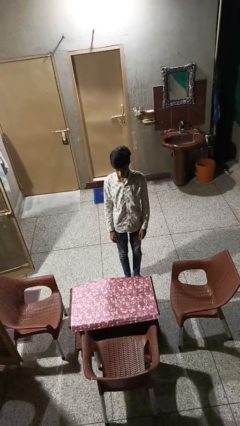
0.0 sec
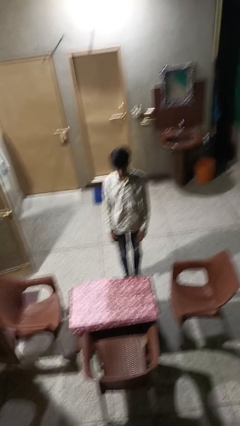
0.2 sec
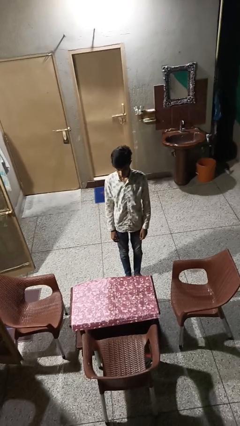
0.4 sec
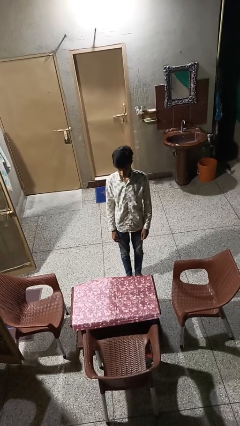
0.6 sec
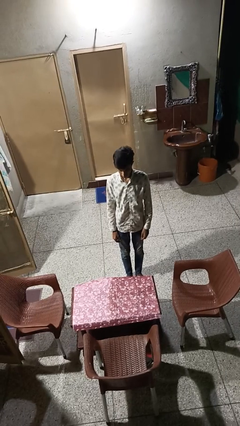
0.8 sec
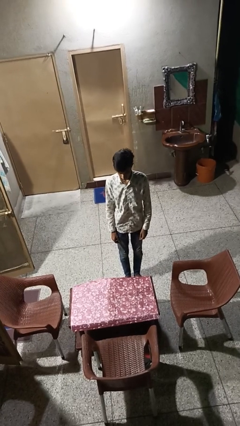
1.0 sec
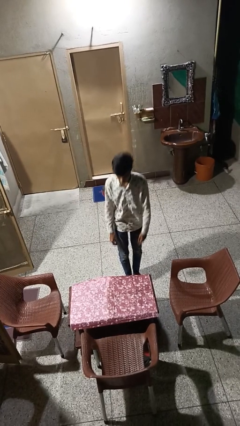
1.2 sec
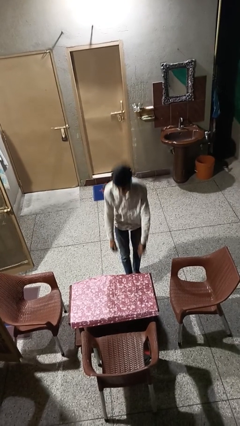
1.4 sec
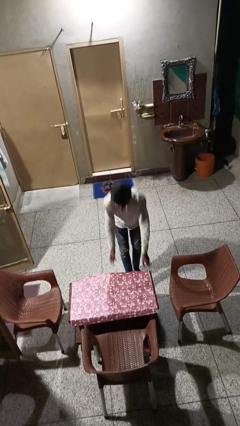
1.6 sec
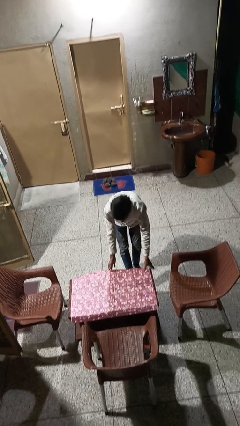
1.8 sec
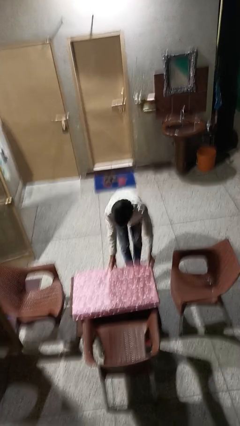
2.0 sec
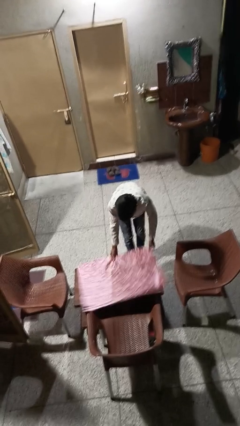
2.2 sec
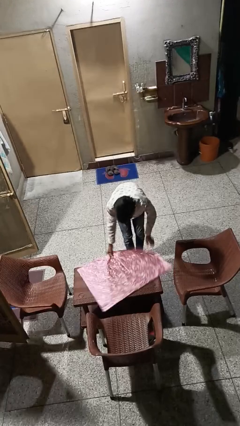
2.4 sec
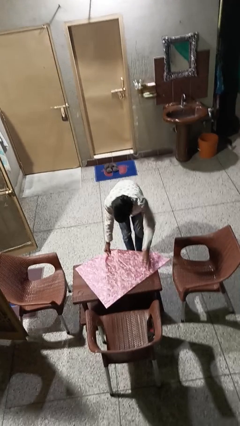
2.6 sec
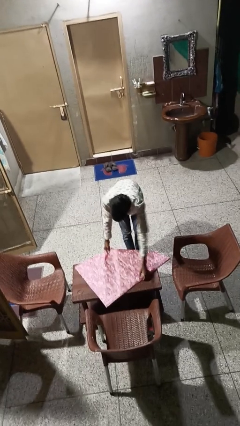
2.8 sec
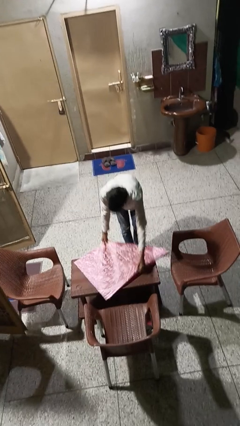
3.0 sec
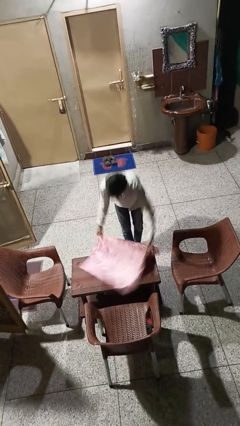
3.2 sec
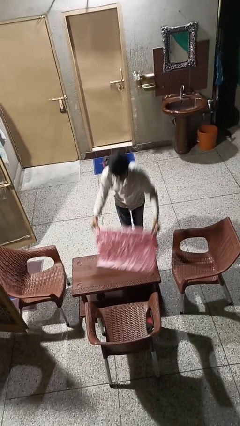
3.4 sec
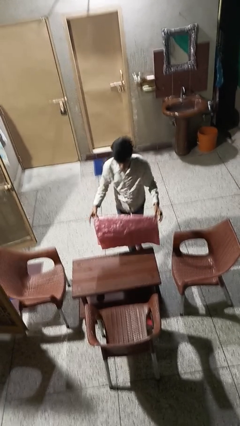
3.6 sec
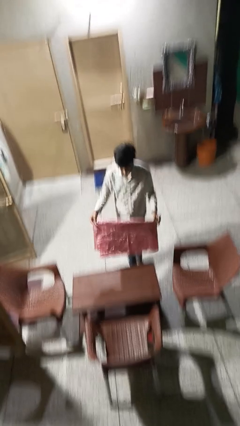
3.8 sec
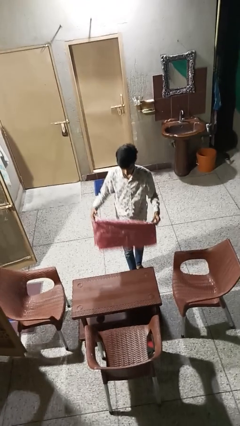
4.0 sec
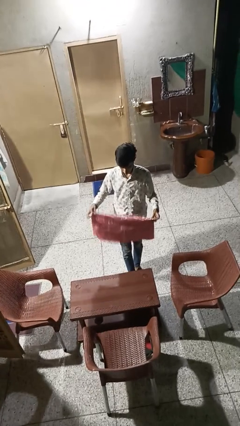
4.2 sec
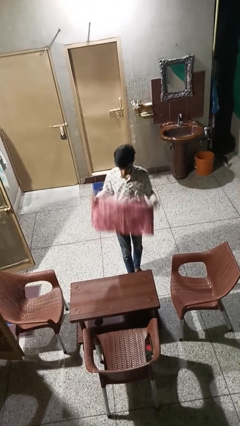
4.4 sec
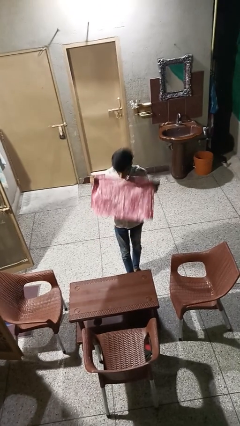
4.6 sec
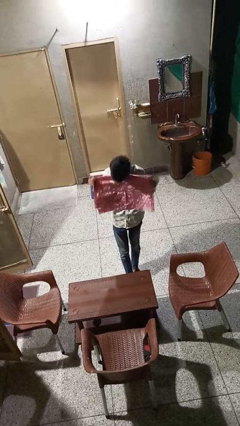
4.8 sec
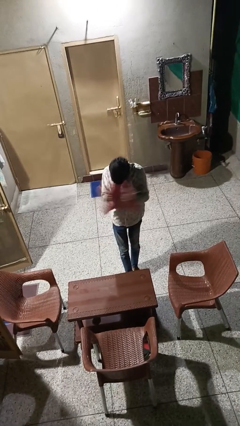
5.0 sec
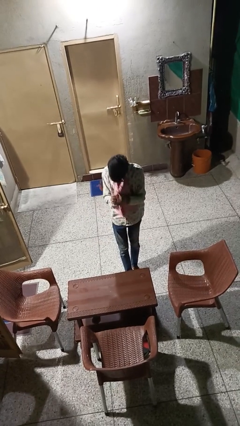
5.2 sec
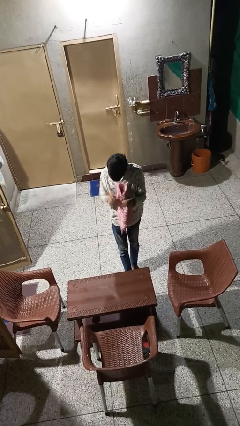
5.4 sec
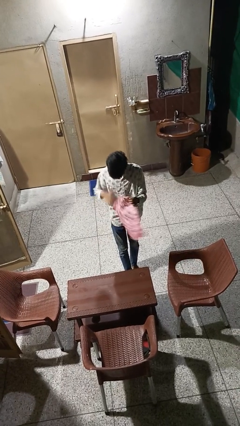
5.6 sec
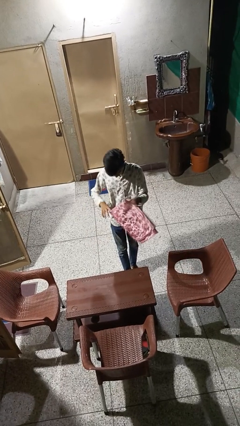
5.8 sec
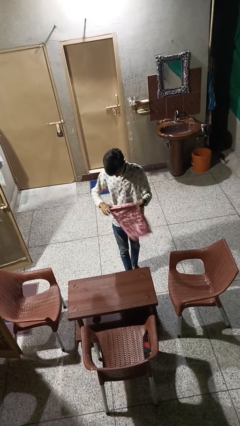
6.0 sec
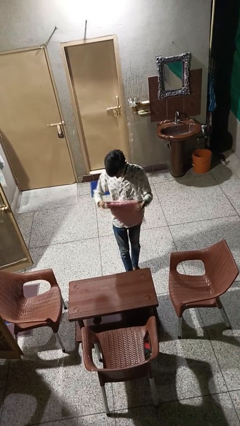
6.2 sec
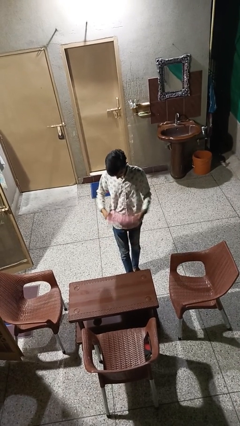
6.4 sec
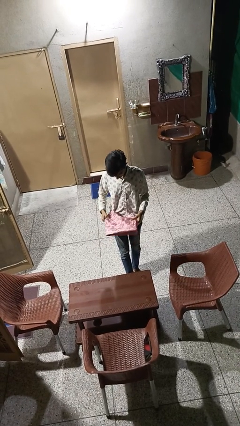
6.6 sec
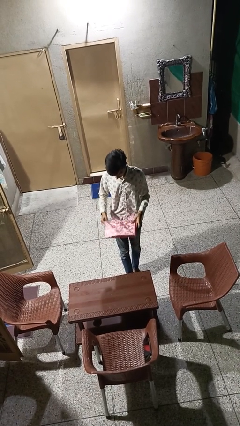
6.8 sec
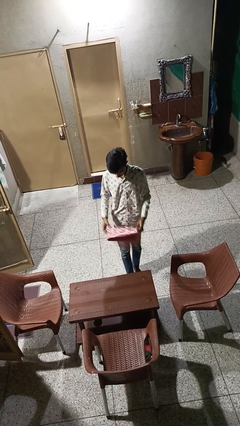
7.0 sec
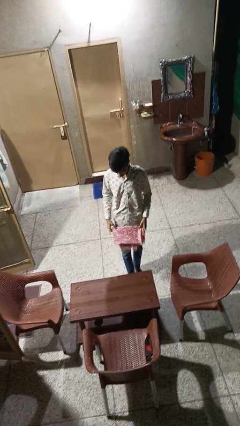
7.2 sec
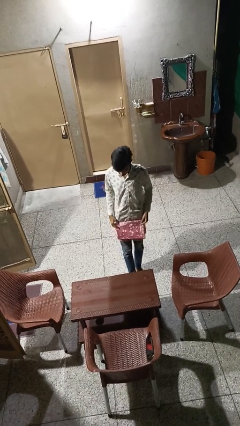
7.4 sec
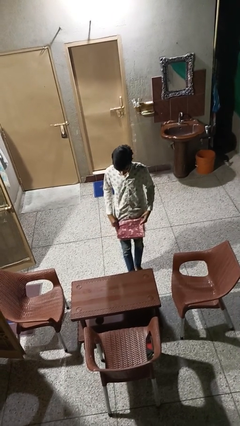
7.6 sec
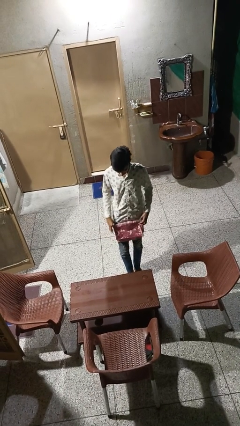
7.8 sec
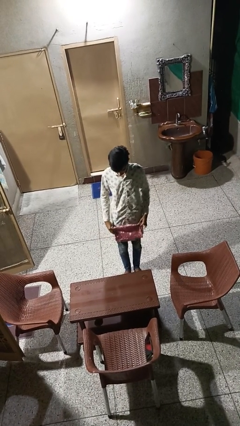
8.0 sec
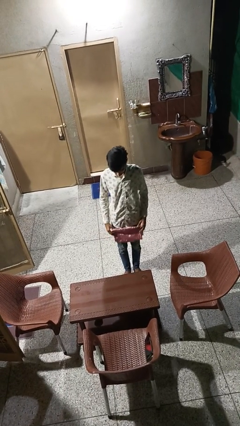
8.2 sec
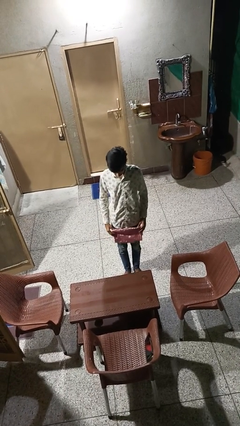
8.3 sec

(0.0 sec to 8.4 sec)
person folds tablecloth

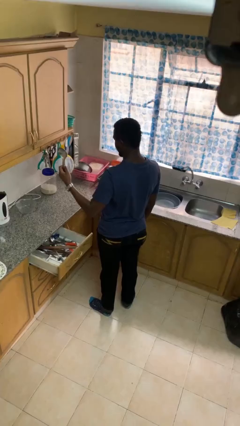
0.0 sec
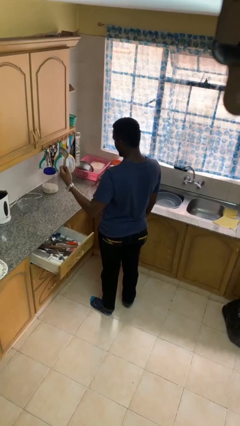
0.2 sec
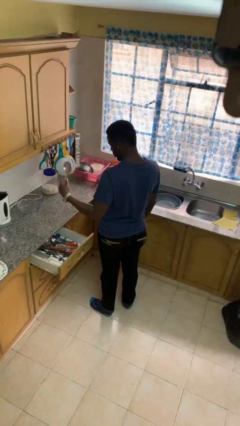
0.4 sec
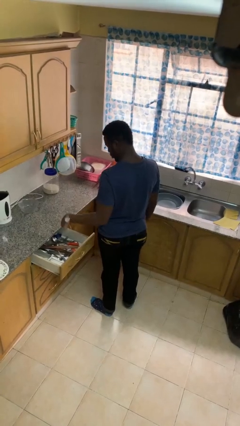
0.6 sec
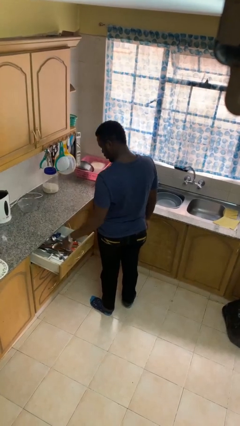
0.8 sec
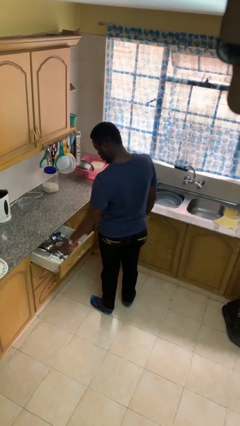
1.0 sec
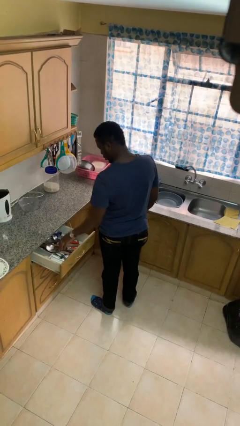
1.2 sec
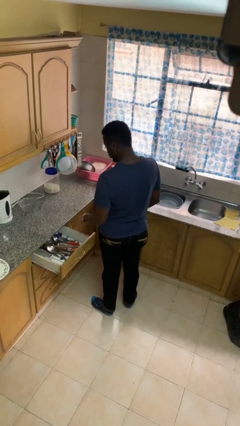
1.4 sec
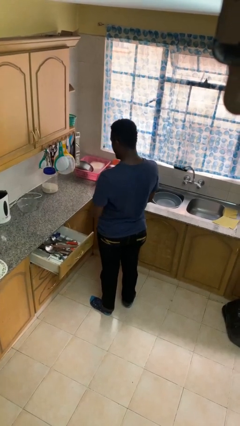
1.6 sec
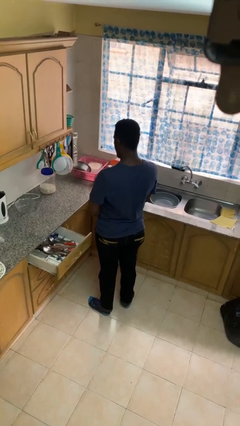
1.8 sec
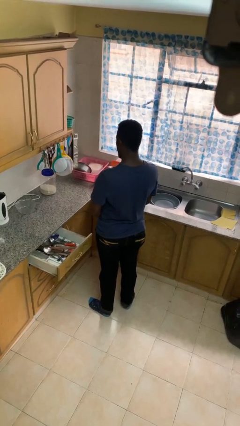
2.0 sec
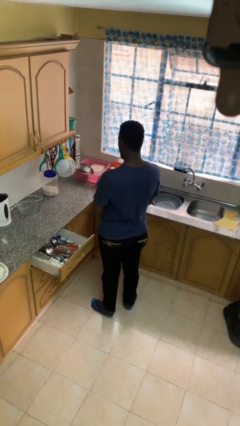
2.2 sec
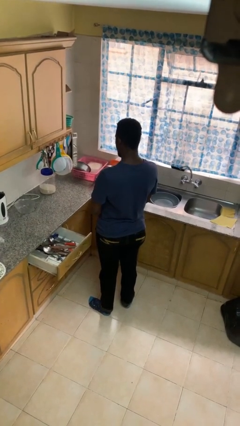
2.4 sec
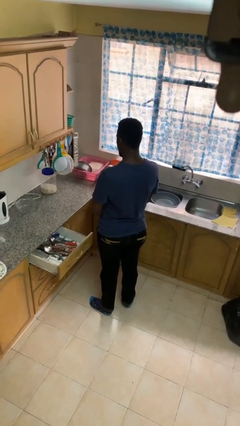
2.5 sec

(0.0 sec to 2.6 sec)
person puts object into kitchen drawer

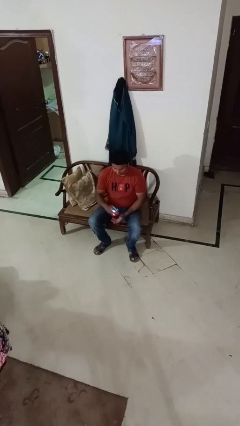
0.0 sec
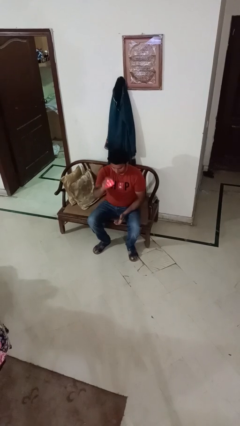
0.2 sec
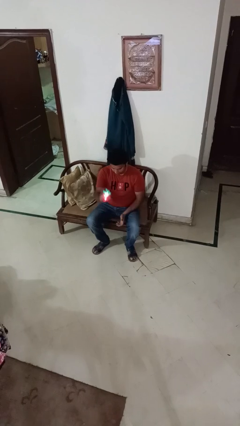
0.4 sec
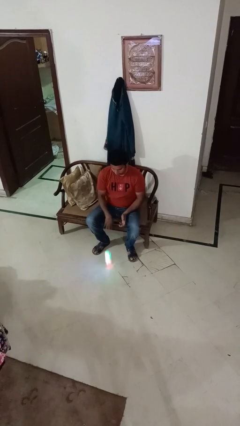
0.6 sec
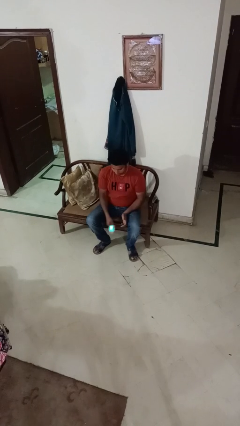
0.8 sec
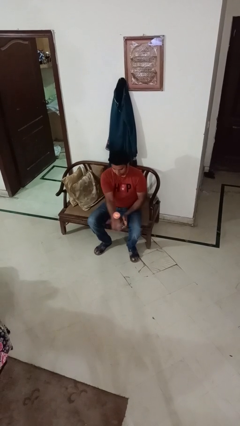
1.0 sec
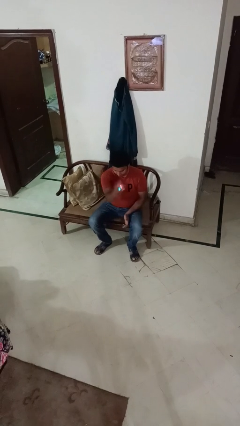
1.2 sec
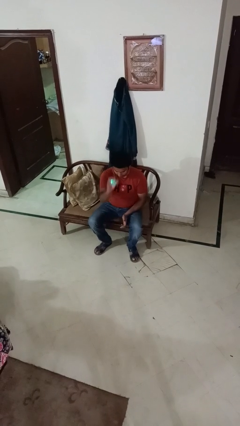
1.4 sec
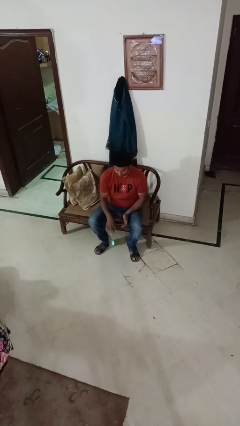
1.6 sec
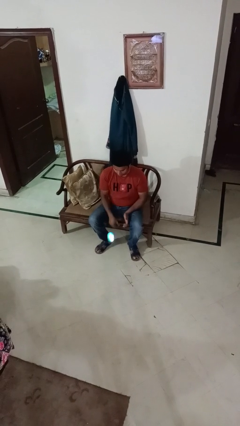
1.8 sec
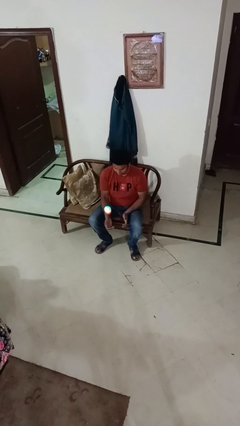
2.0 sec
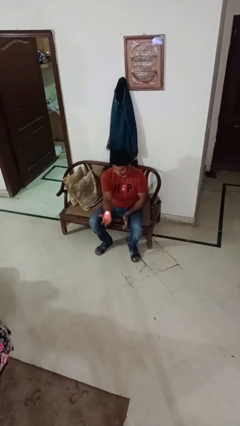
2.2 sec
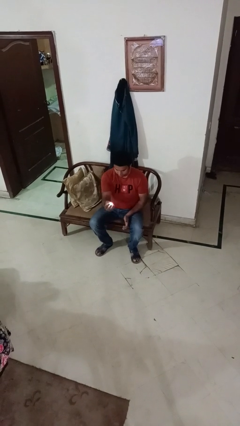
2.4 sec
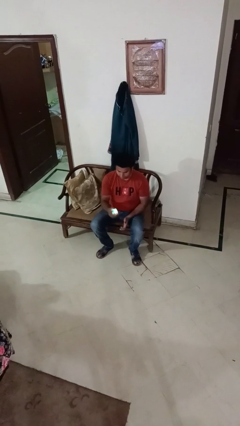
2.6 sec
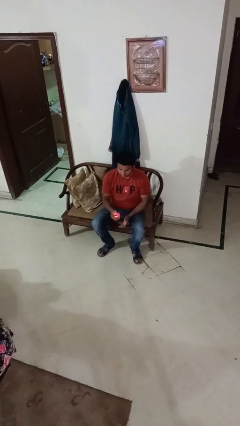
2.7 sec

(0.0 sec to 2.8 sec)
person bounces ball on floor

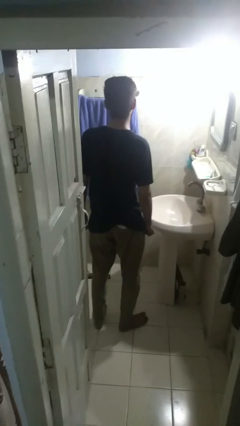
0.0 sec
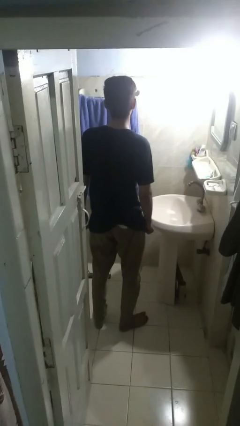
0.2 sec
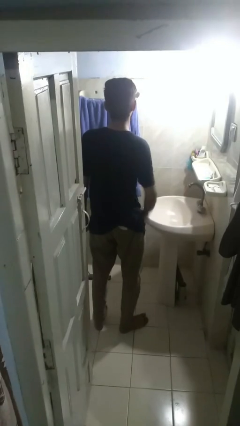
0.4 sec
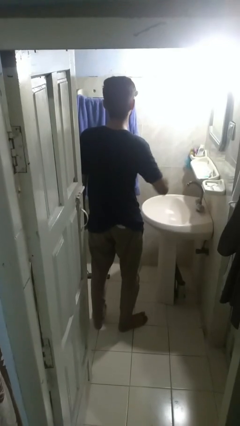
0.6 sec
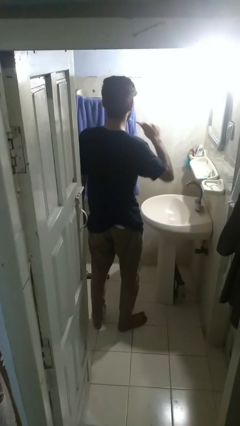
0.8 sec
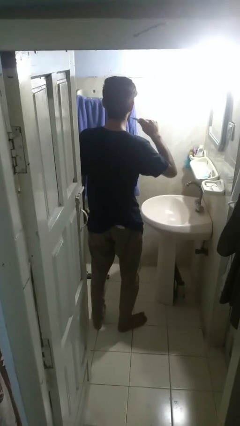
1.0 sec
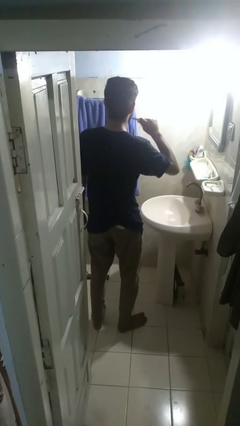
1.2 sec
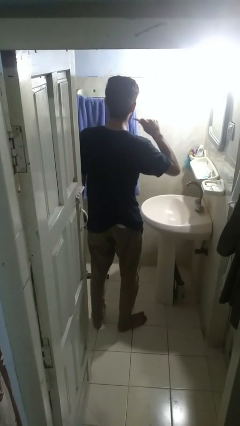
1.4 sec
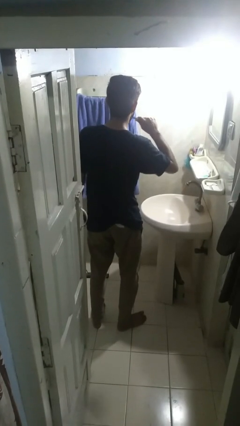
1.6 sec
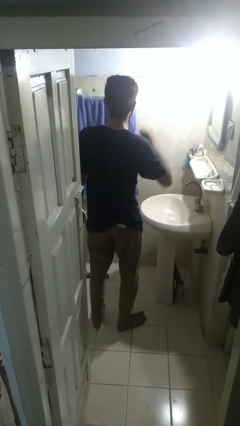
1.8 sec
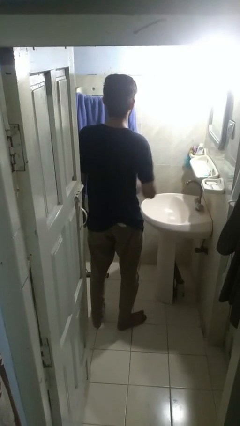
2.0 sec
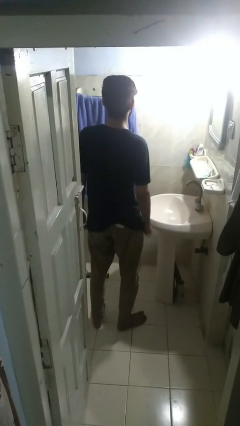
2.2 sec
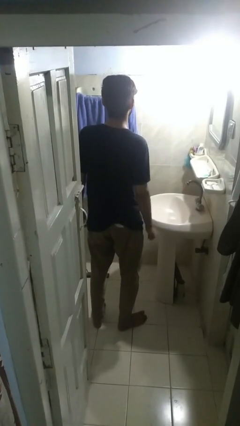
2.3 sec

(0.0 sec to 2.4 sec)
person brushes teeth

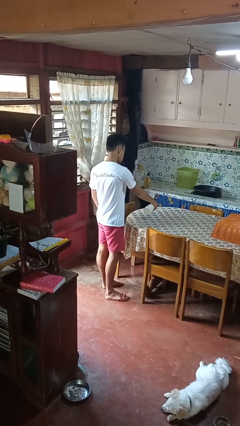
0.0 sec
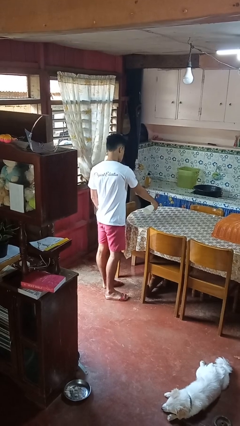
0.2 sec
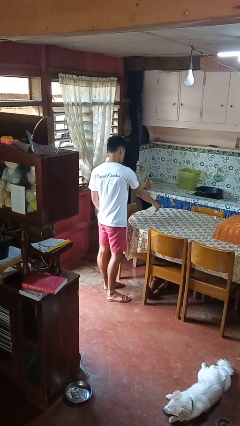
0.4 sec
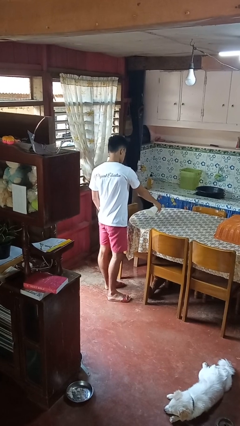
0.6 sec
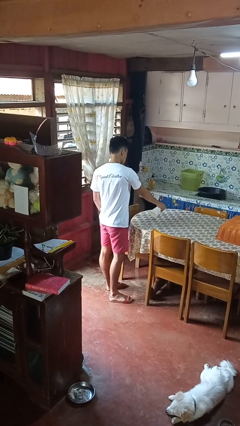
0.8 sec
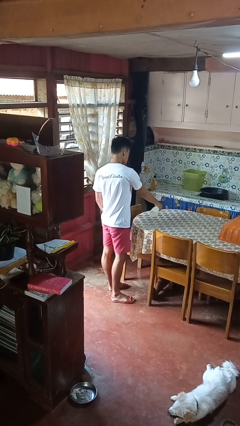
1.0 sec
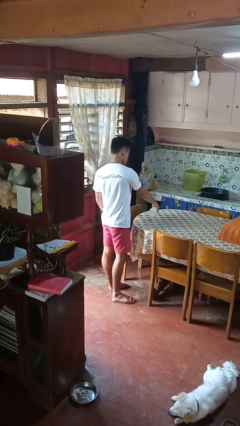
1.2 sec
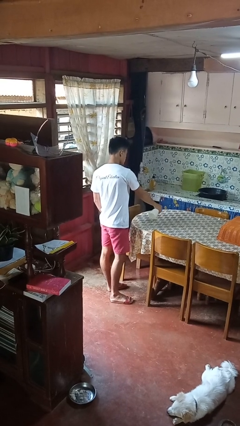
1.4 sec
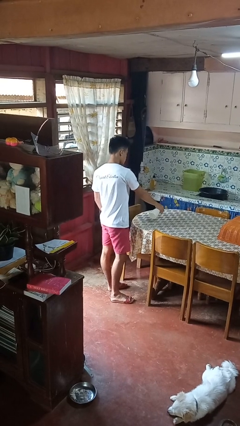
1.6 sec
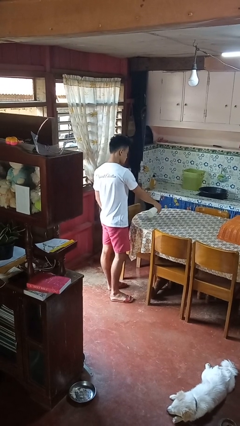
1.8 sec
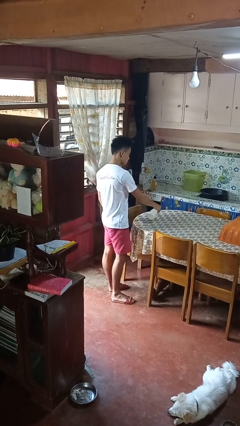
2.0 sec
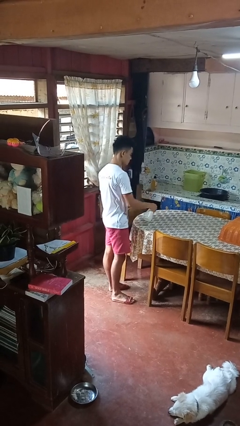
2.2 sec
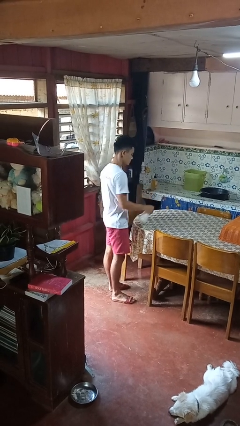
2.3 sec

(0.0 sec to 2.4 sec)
person sprays from bottle
